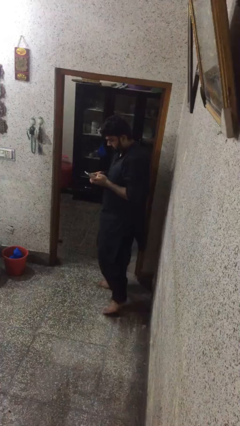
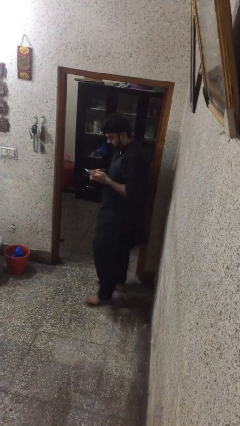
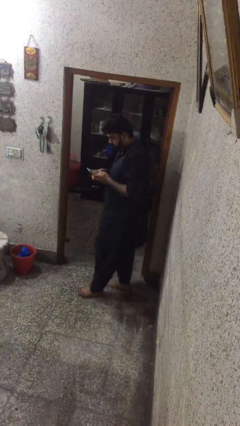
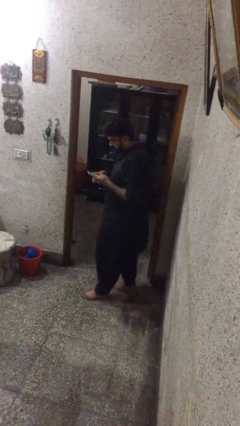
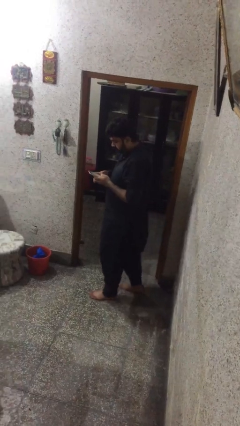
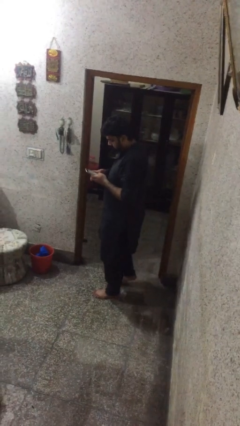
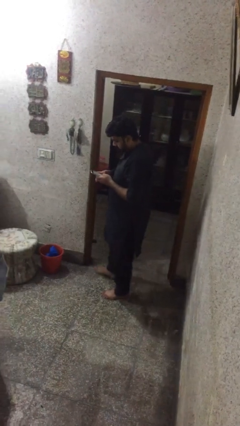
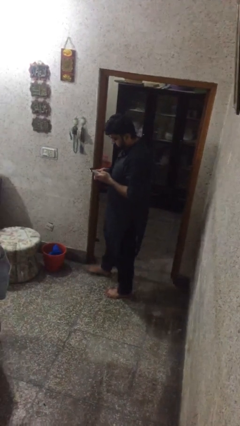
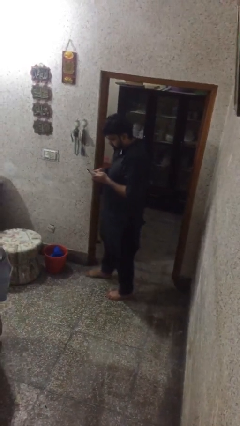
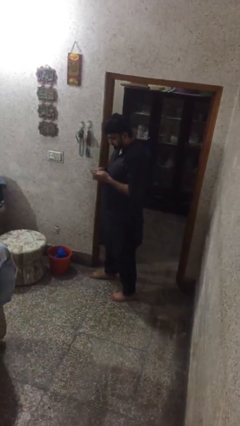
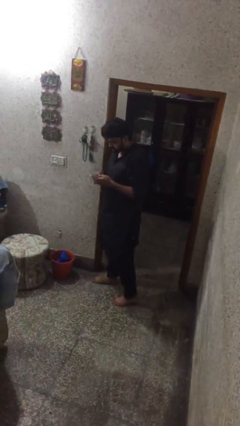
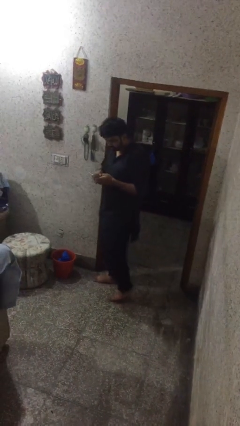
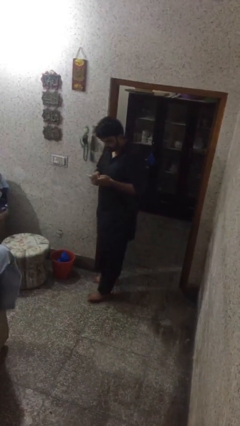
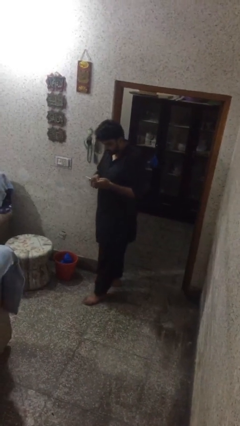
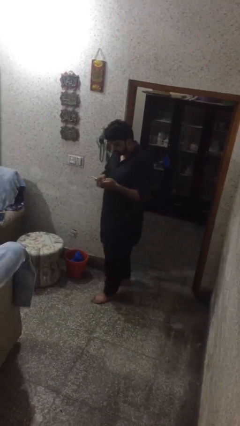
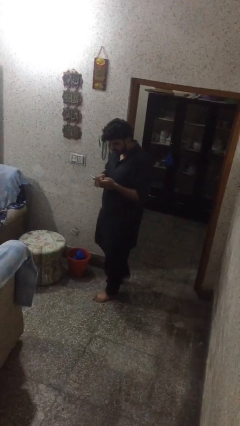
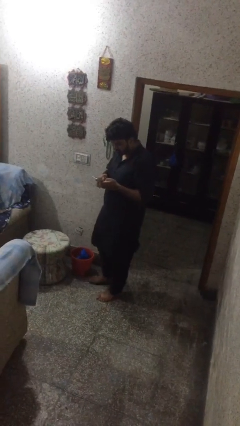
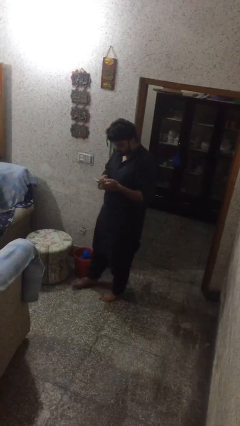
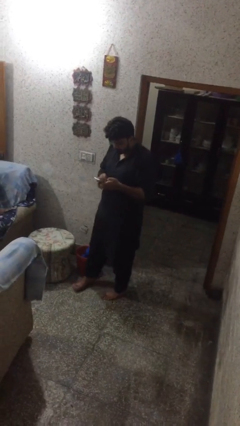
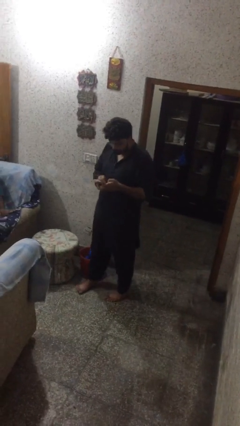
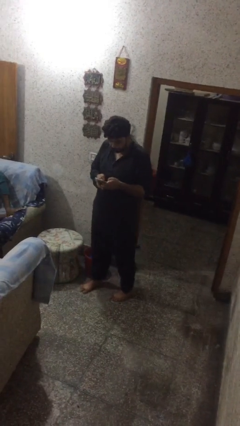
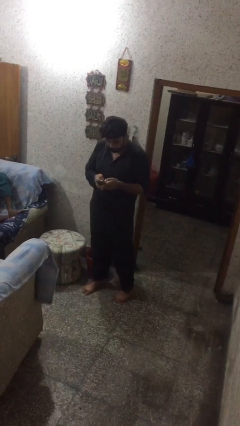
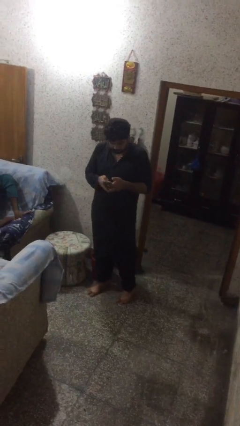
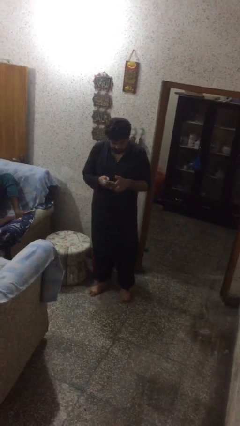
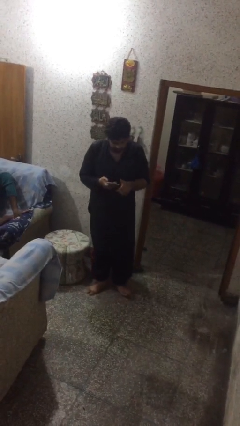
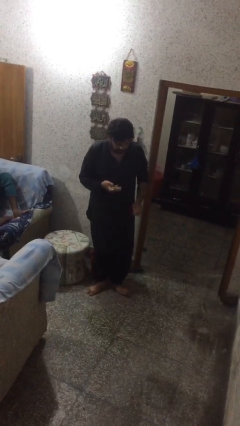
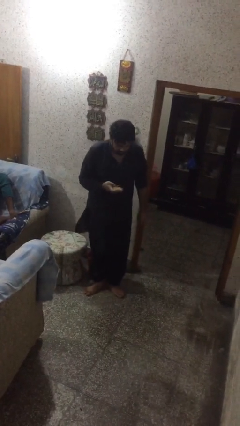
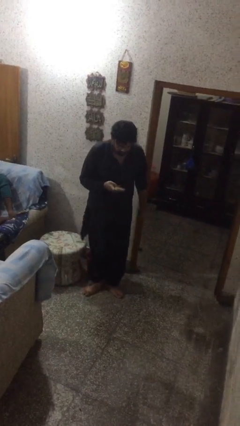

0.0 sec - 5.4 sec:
person texts on phone

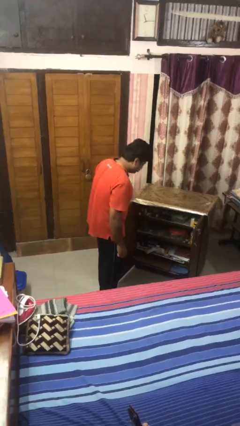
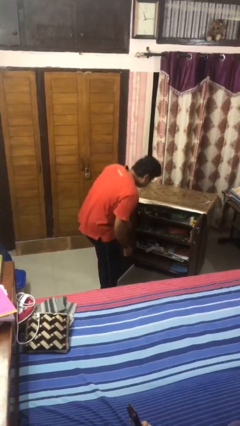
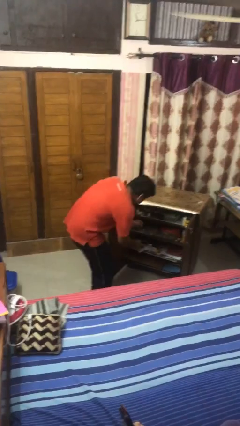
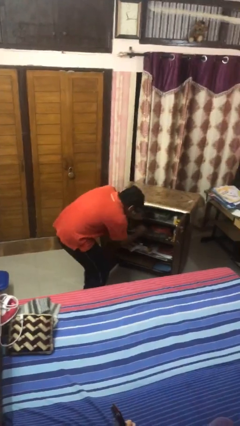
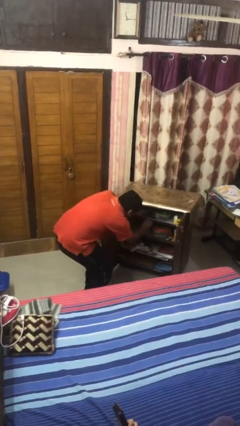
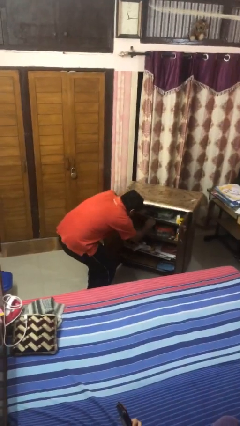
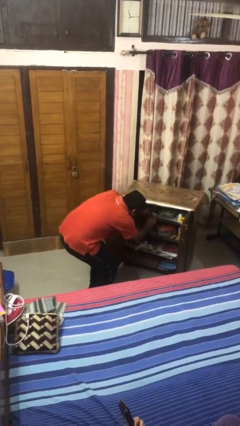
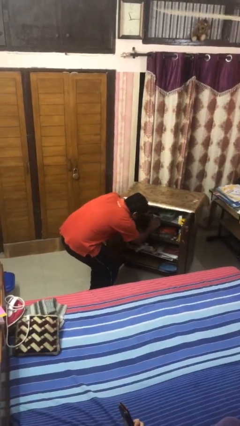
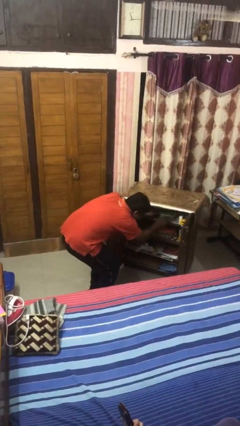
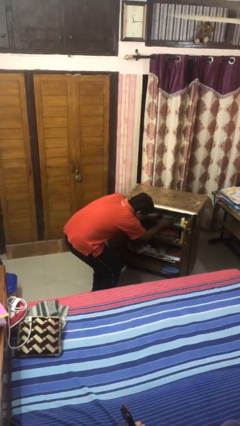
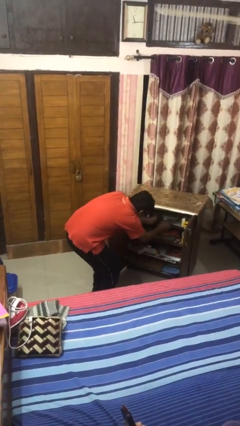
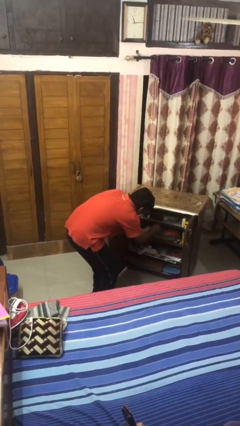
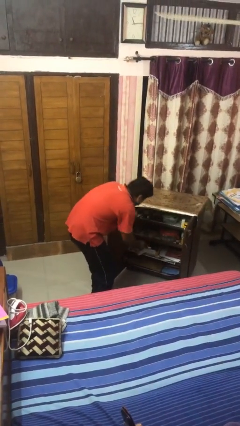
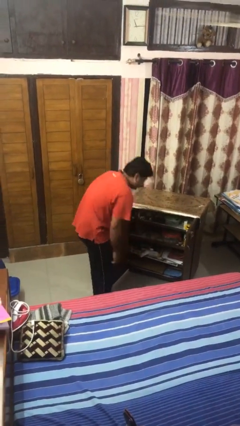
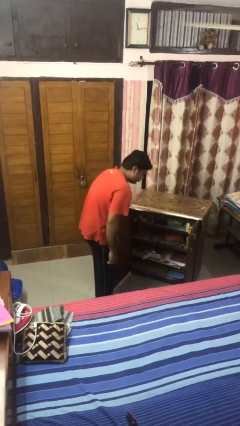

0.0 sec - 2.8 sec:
person searches in cabinet

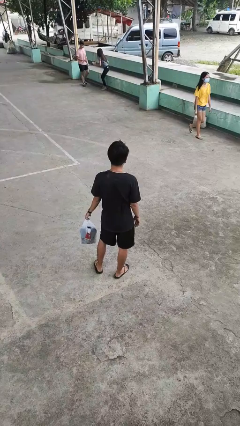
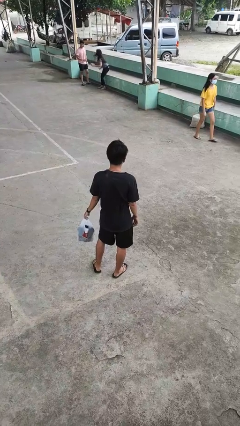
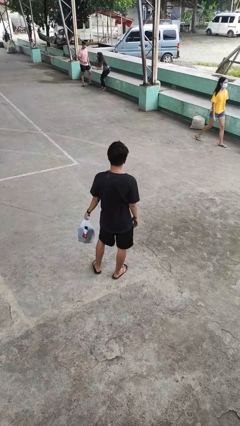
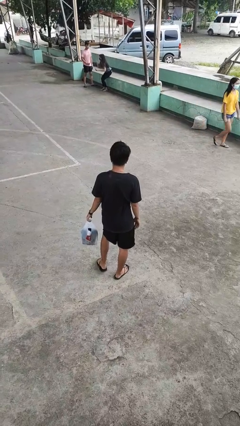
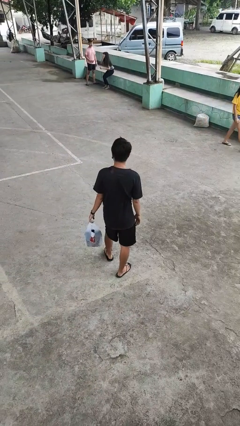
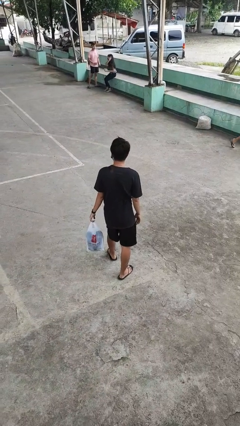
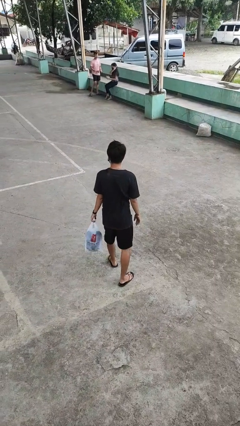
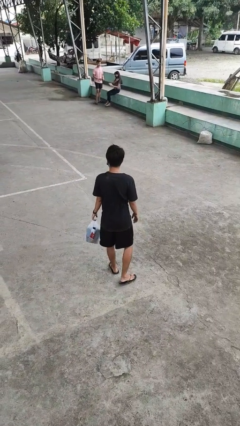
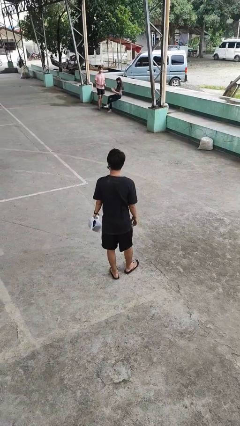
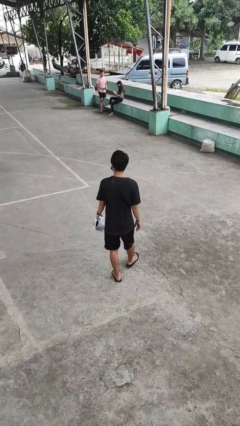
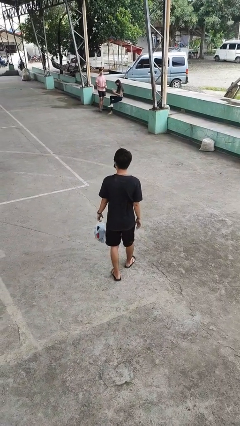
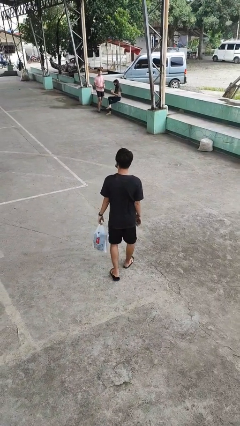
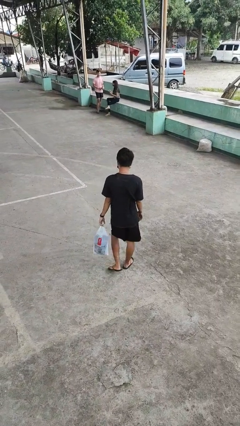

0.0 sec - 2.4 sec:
person carries groceries

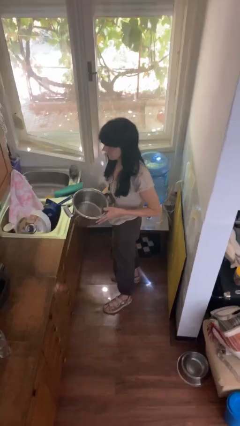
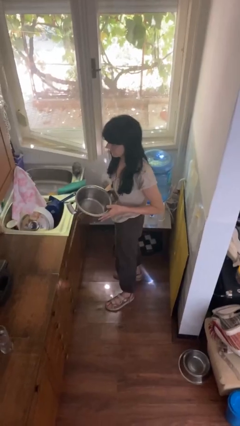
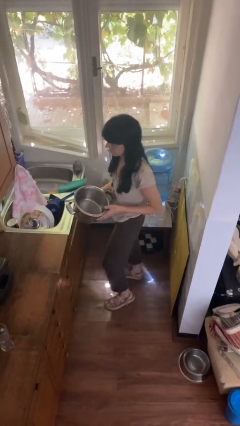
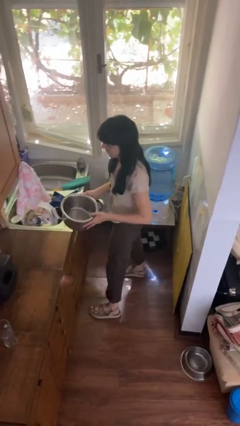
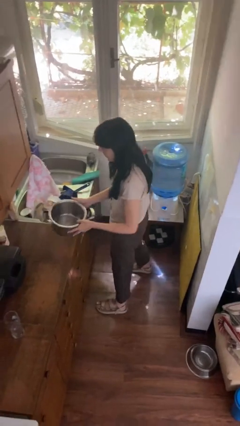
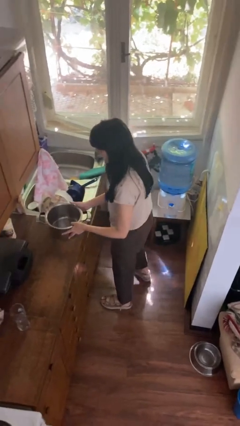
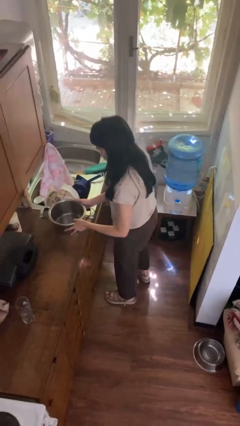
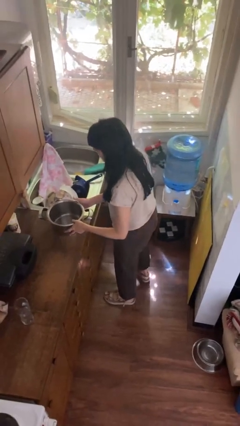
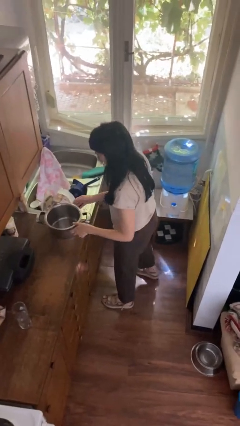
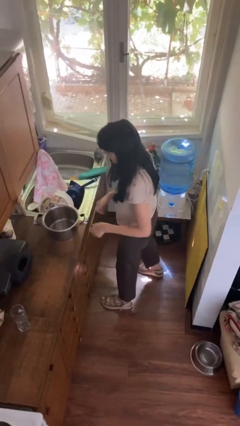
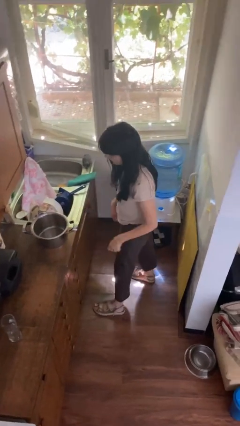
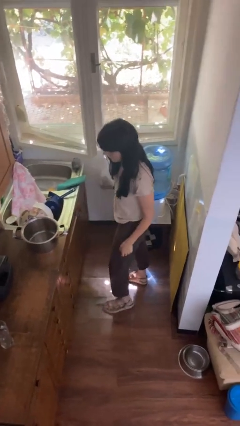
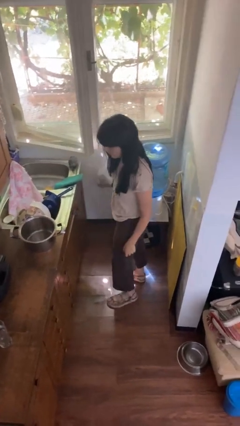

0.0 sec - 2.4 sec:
person puts down object on countertop

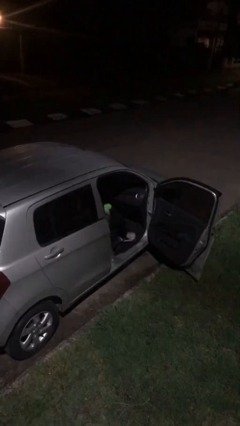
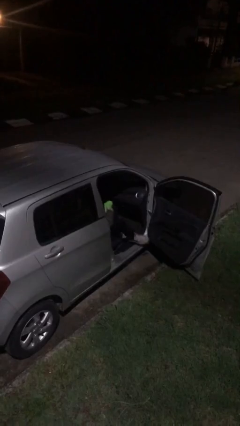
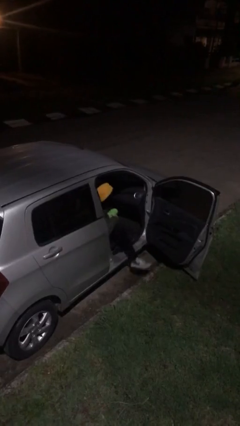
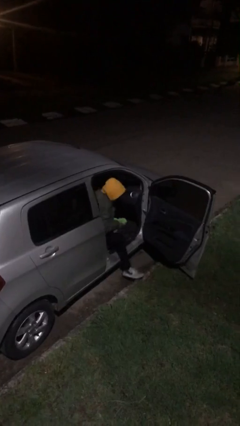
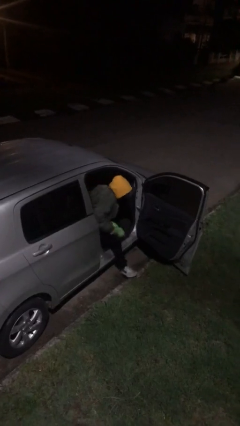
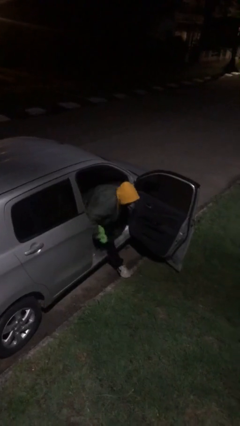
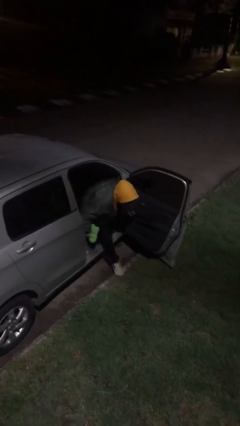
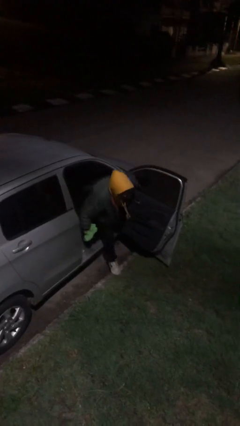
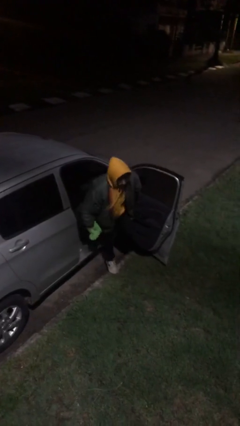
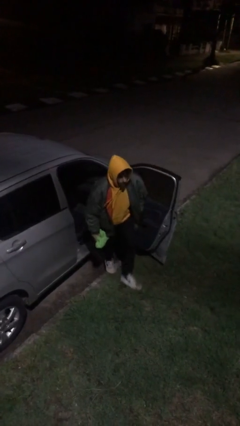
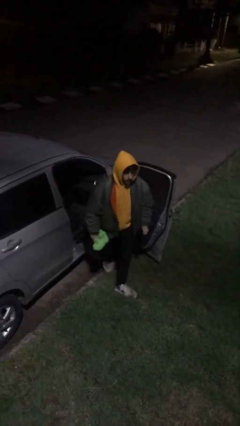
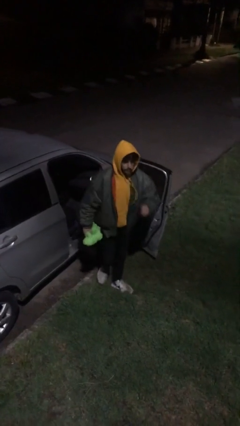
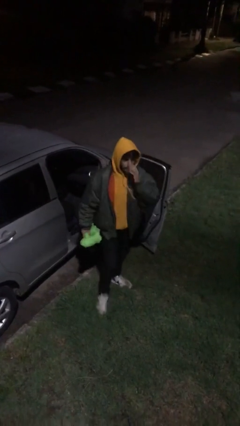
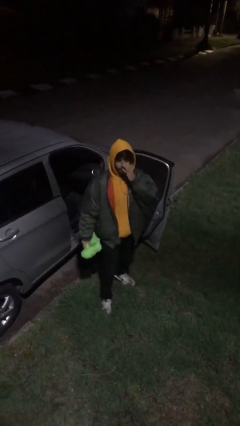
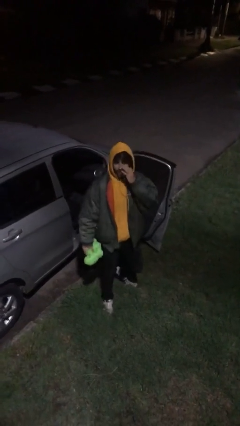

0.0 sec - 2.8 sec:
person exits car

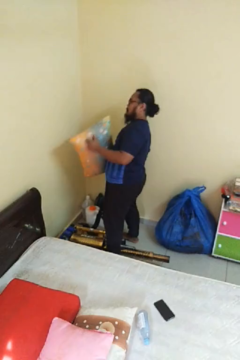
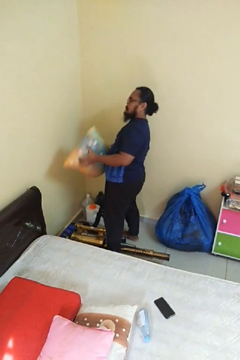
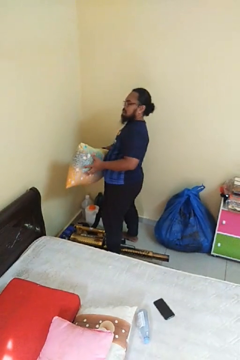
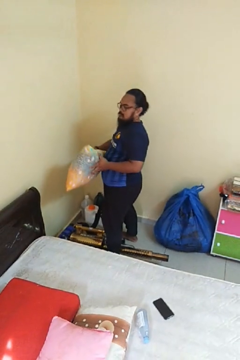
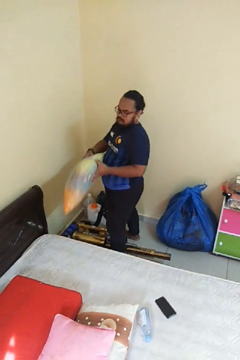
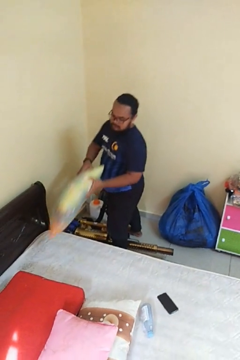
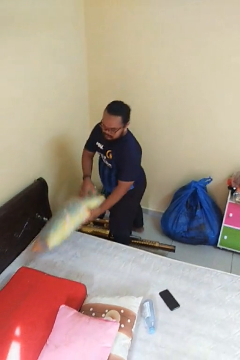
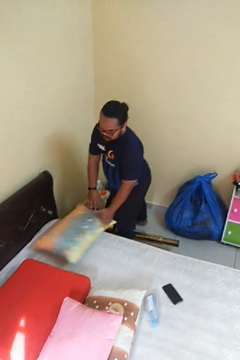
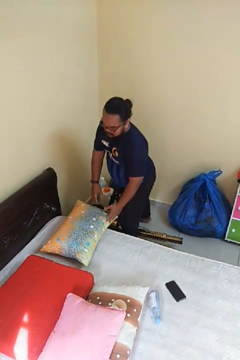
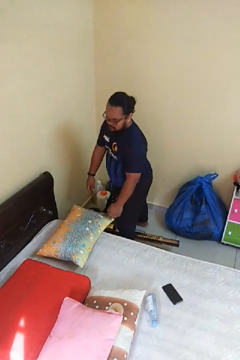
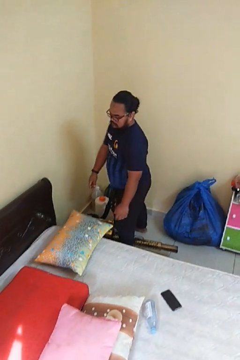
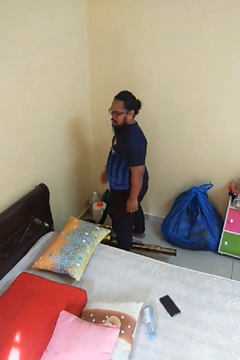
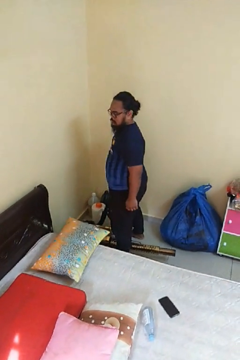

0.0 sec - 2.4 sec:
person puts down object on bed

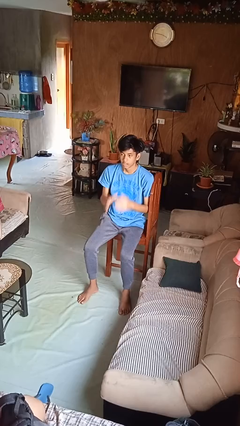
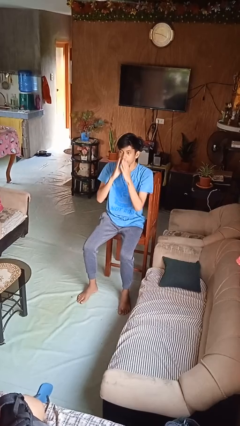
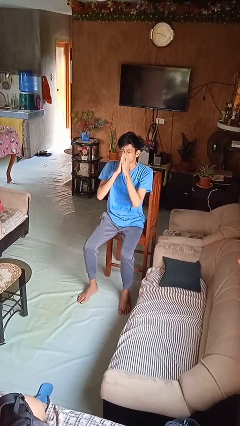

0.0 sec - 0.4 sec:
person sneezes into hand
